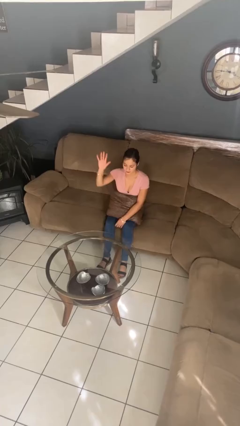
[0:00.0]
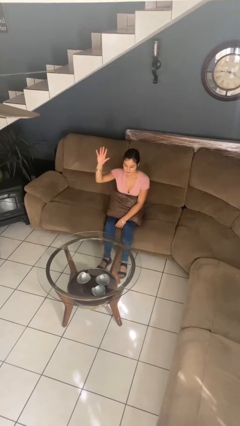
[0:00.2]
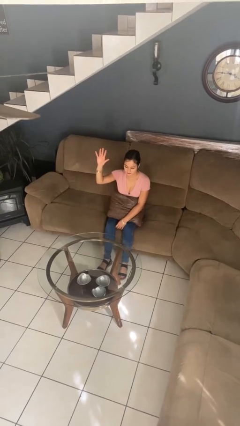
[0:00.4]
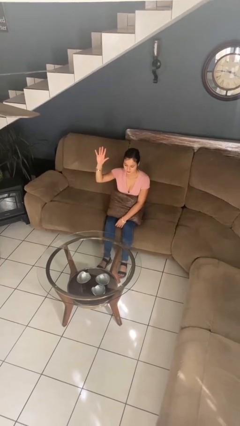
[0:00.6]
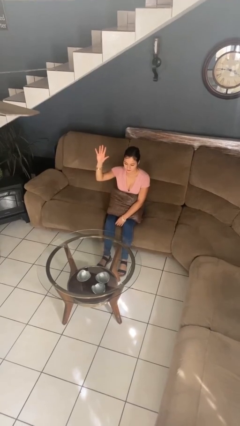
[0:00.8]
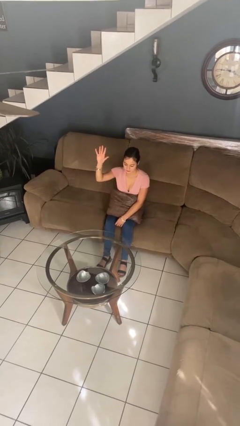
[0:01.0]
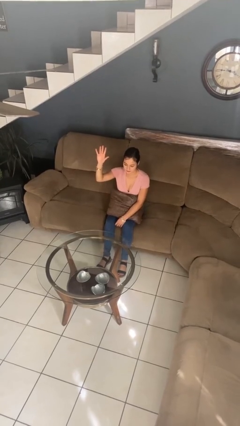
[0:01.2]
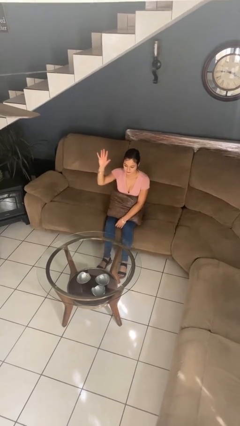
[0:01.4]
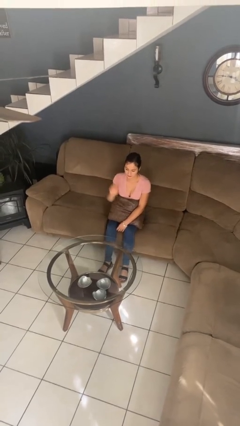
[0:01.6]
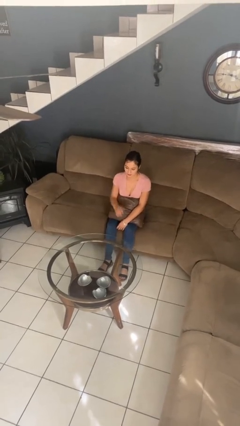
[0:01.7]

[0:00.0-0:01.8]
person gestures number five

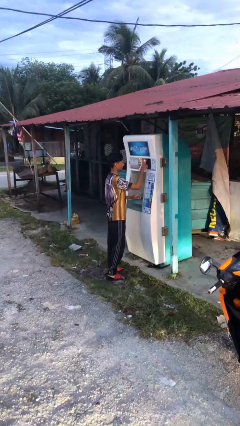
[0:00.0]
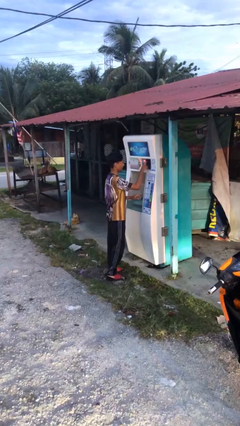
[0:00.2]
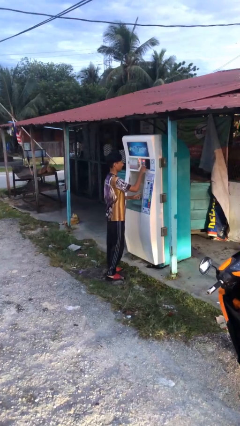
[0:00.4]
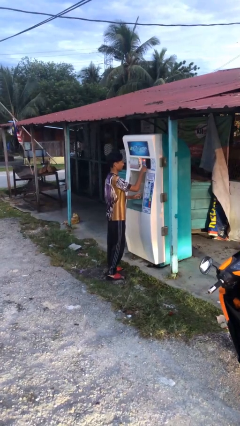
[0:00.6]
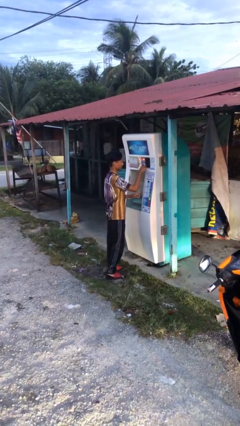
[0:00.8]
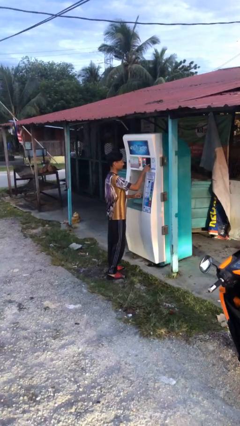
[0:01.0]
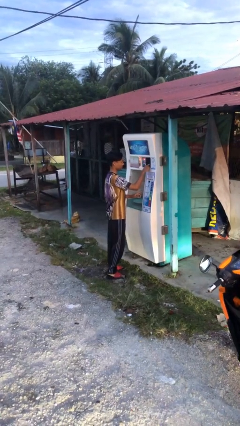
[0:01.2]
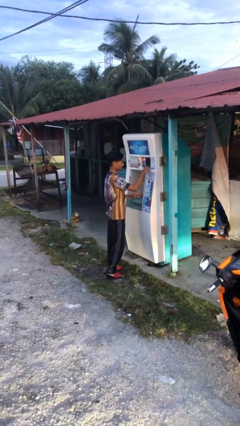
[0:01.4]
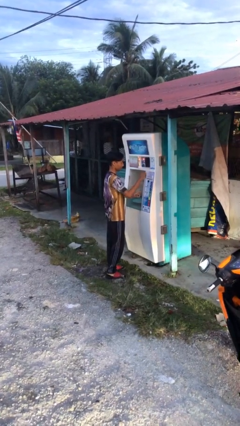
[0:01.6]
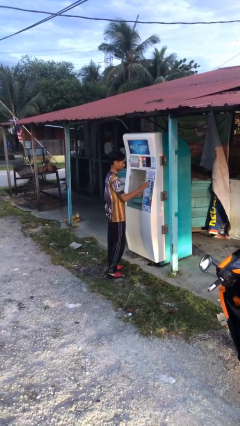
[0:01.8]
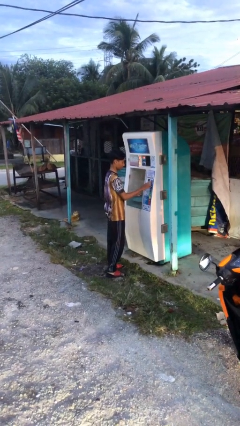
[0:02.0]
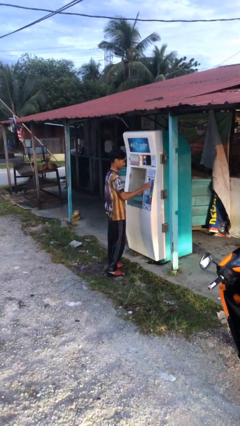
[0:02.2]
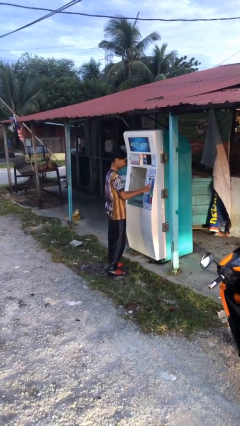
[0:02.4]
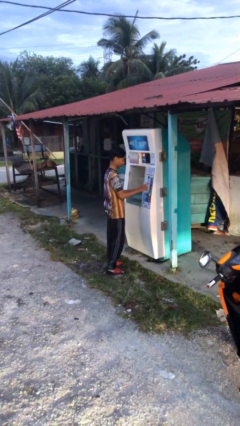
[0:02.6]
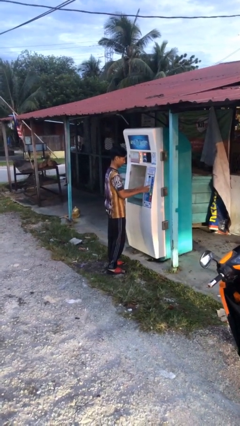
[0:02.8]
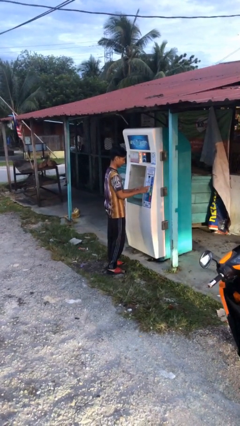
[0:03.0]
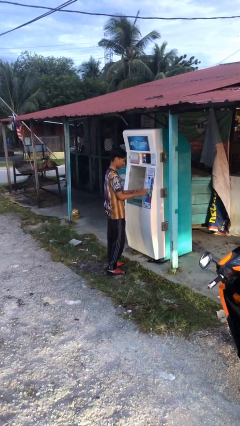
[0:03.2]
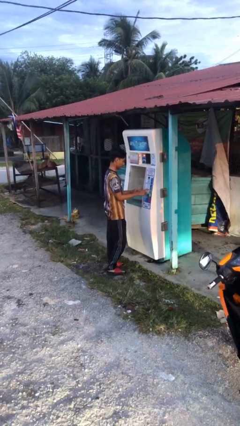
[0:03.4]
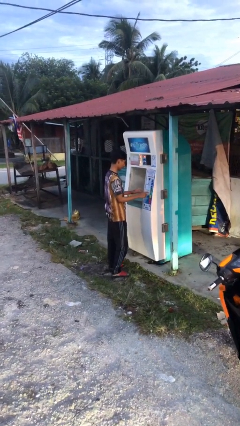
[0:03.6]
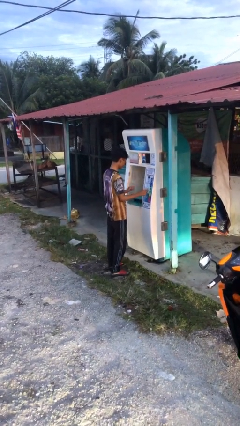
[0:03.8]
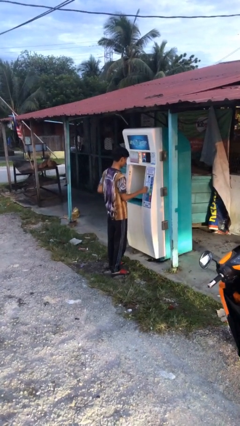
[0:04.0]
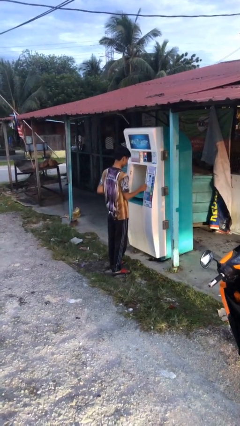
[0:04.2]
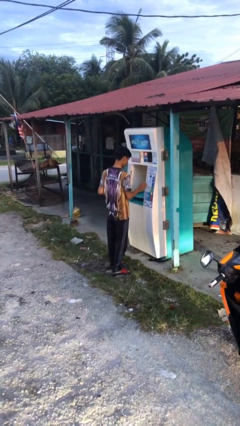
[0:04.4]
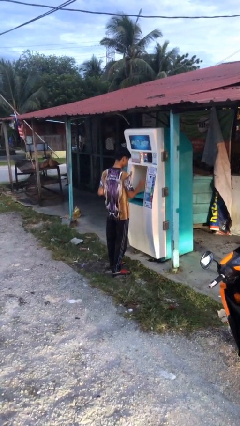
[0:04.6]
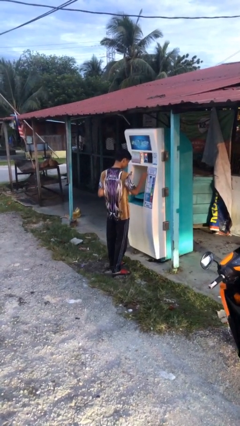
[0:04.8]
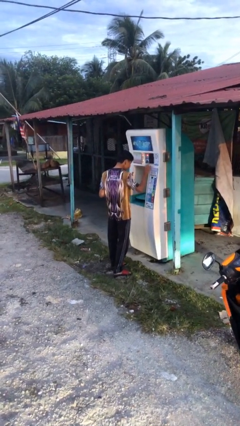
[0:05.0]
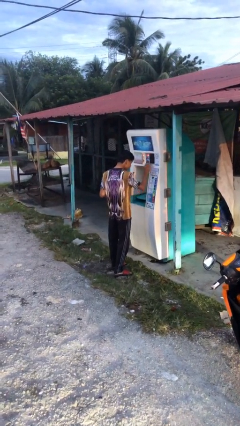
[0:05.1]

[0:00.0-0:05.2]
person purchases from machine

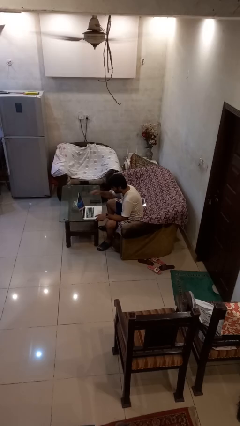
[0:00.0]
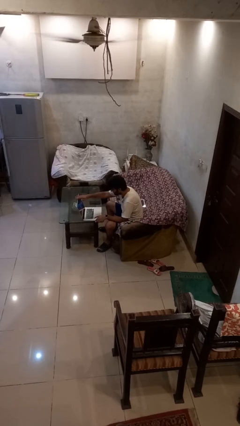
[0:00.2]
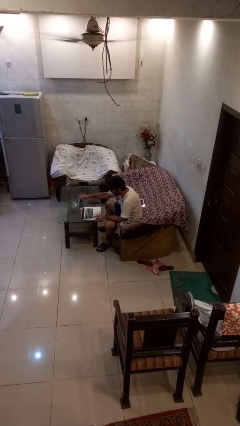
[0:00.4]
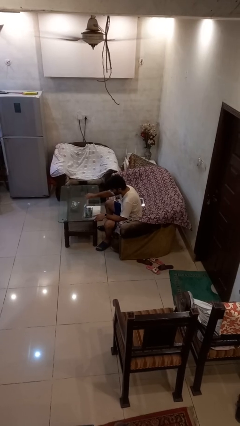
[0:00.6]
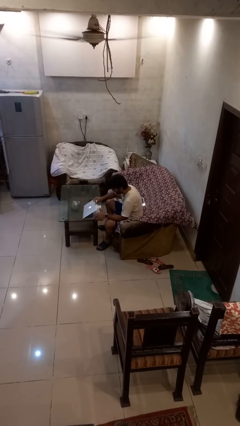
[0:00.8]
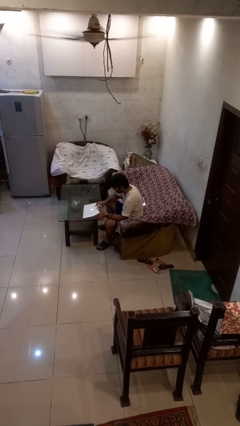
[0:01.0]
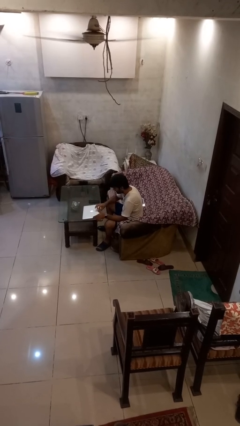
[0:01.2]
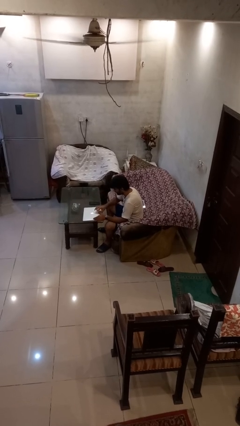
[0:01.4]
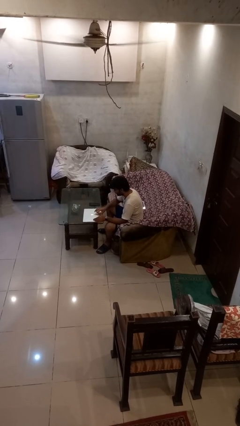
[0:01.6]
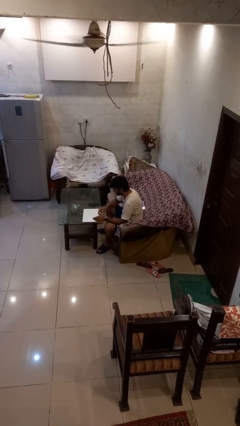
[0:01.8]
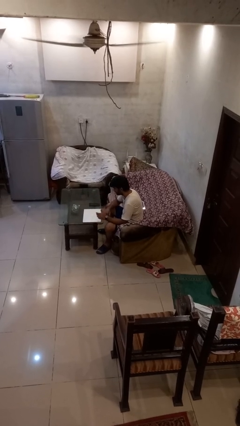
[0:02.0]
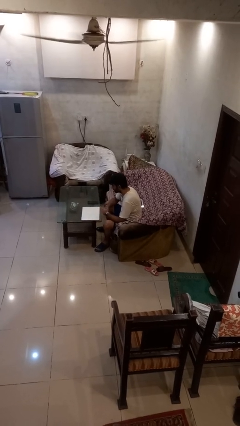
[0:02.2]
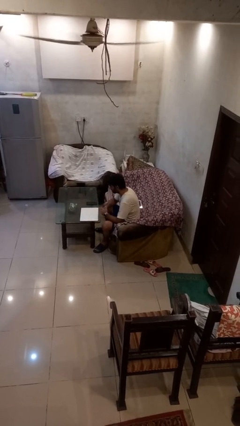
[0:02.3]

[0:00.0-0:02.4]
person closes laptop

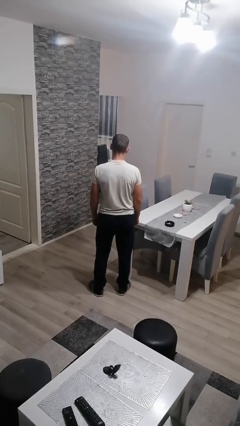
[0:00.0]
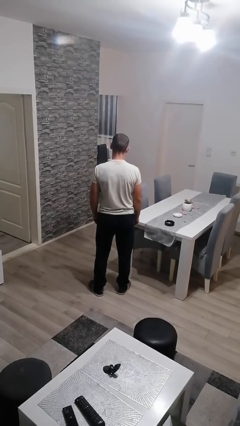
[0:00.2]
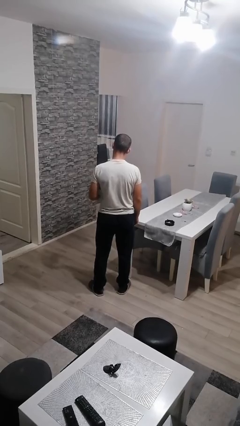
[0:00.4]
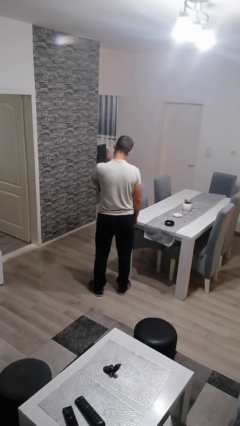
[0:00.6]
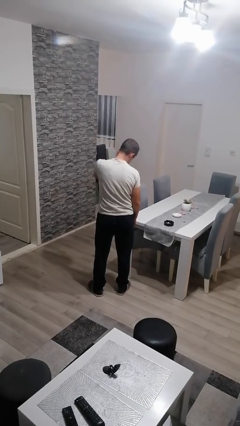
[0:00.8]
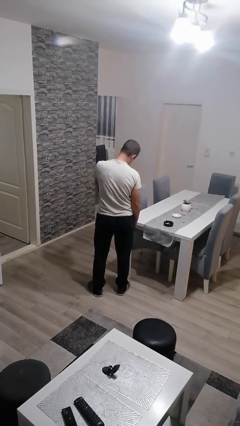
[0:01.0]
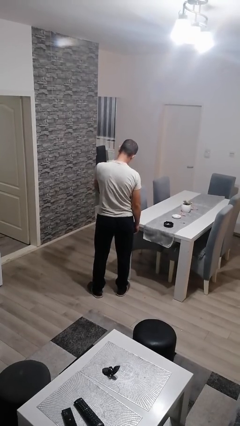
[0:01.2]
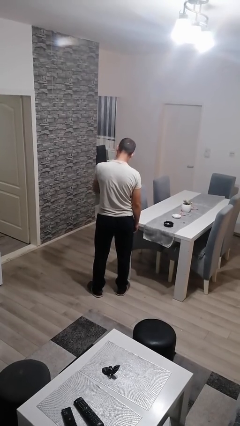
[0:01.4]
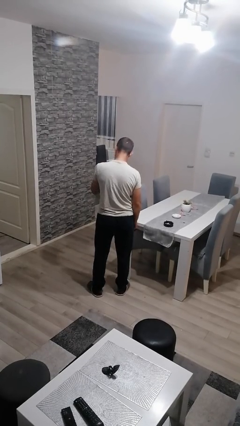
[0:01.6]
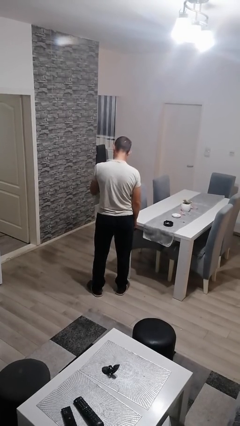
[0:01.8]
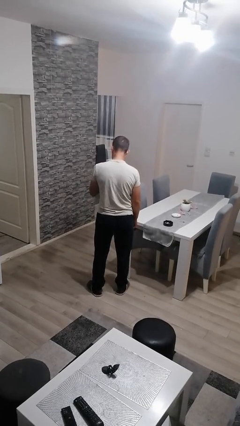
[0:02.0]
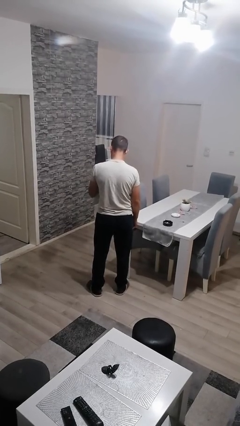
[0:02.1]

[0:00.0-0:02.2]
person swats bug

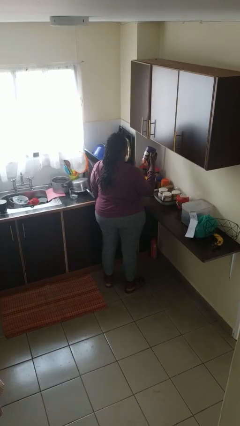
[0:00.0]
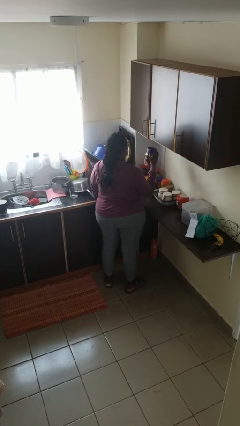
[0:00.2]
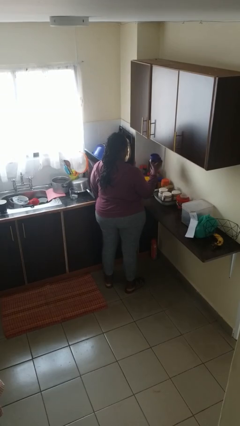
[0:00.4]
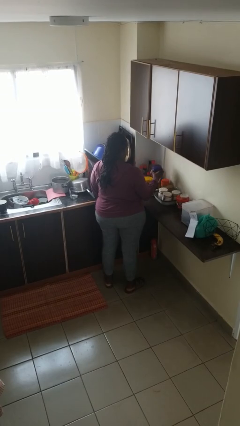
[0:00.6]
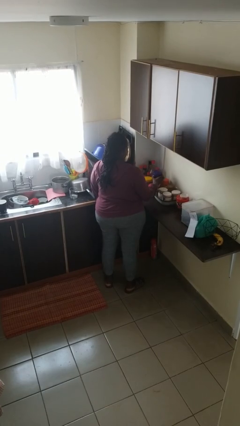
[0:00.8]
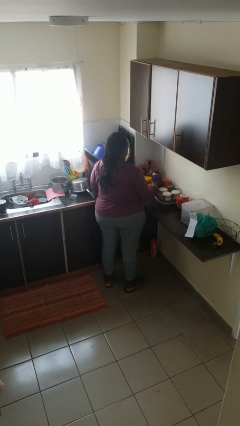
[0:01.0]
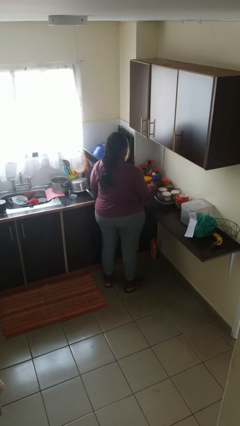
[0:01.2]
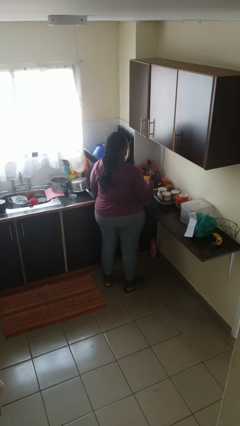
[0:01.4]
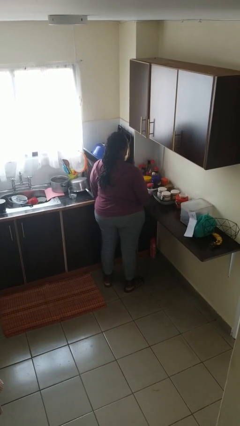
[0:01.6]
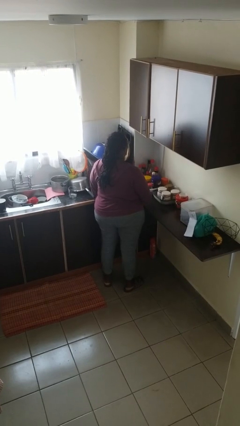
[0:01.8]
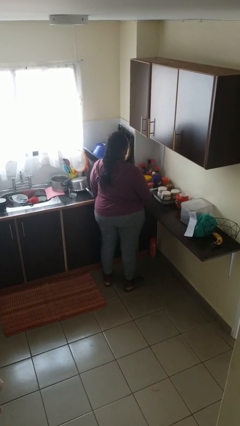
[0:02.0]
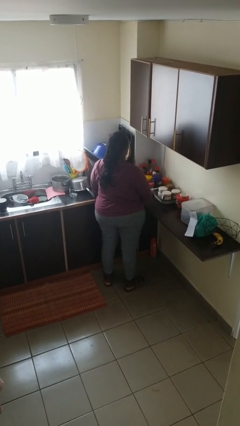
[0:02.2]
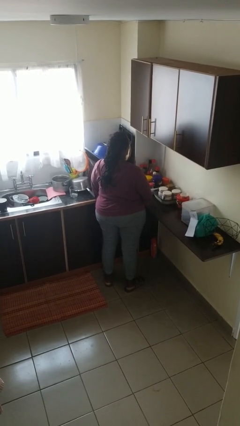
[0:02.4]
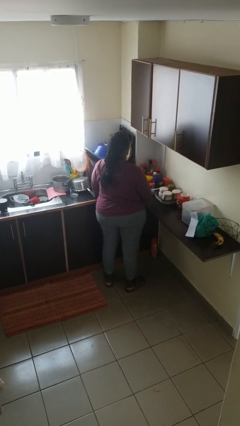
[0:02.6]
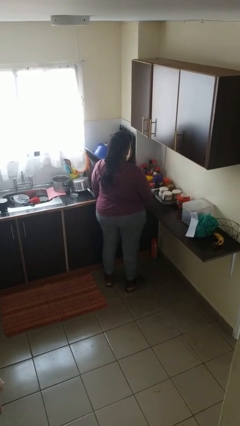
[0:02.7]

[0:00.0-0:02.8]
person puts down object on countertop

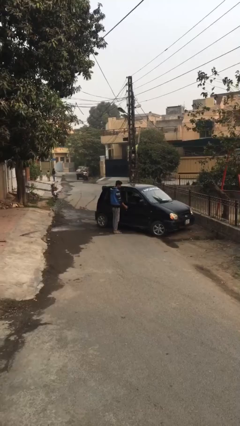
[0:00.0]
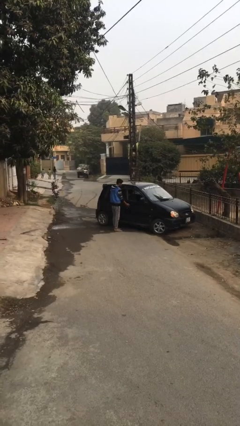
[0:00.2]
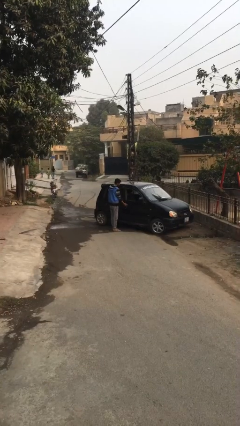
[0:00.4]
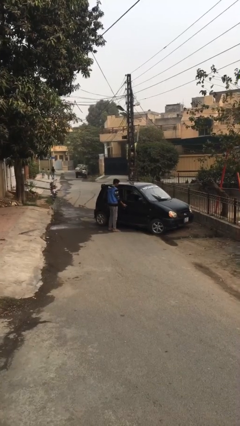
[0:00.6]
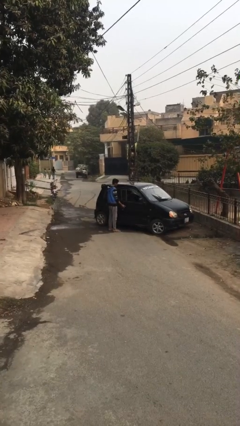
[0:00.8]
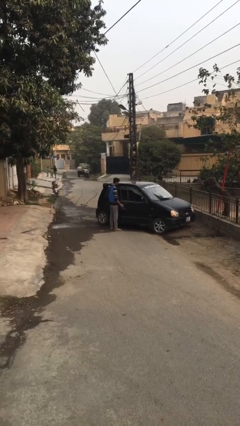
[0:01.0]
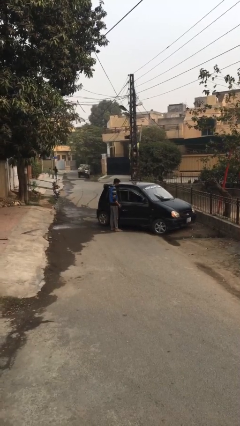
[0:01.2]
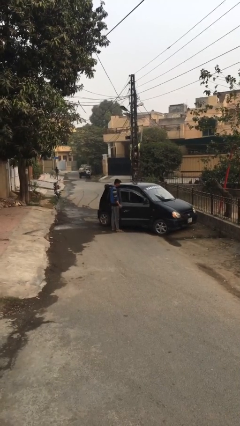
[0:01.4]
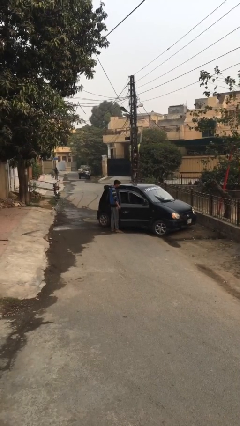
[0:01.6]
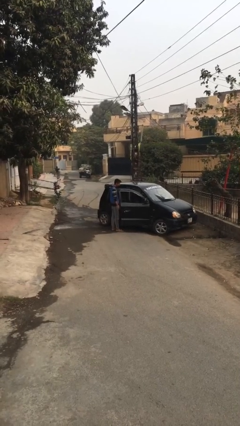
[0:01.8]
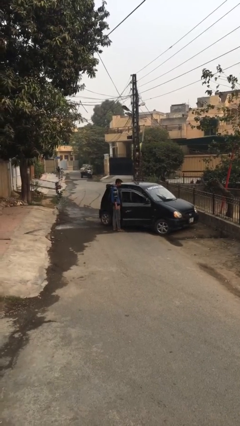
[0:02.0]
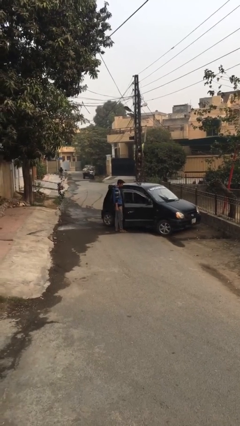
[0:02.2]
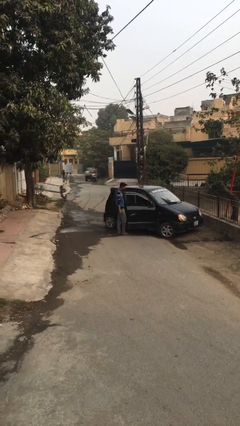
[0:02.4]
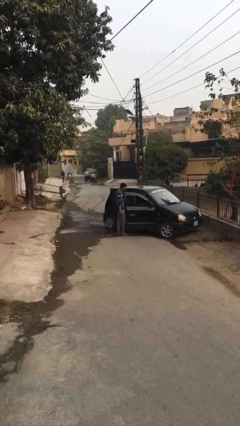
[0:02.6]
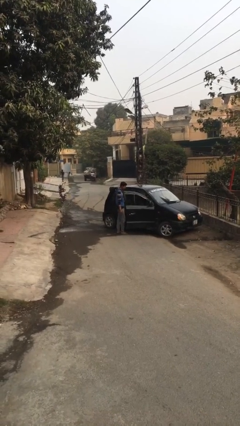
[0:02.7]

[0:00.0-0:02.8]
person opens car door
